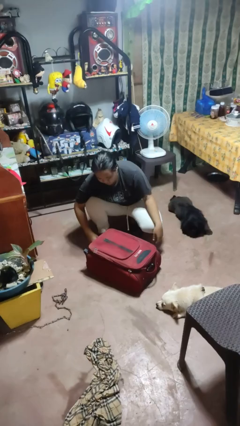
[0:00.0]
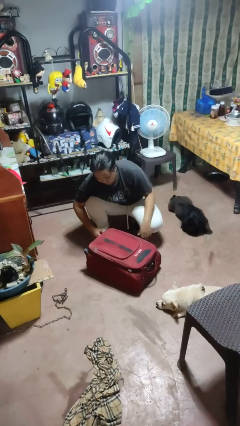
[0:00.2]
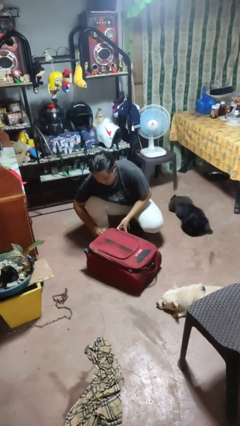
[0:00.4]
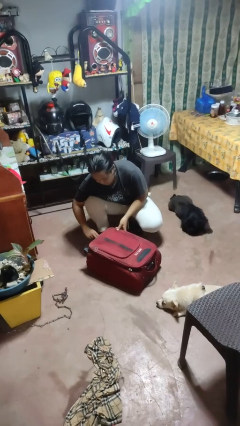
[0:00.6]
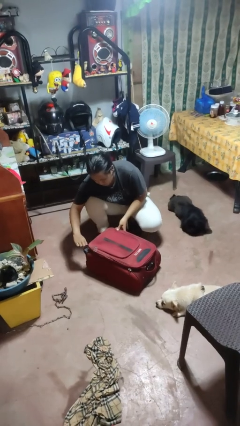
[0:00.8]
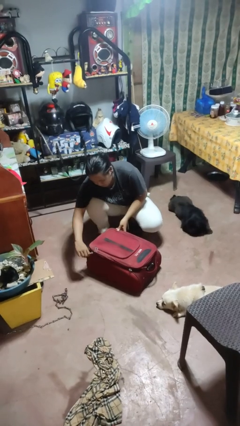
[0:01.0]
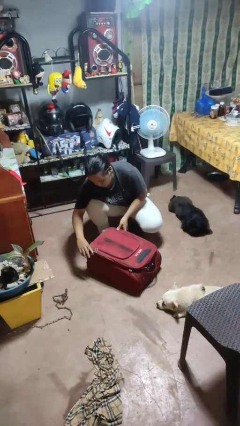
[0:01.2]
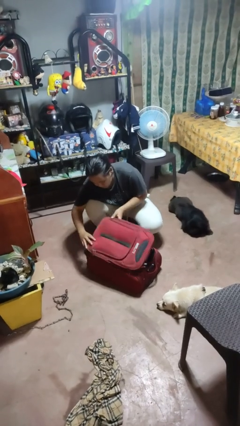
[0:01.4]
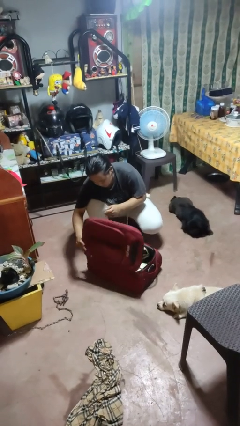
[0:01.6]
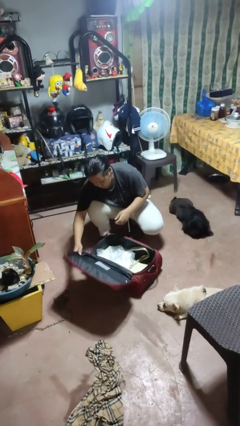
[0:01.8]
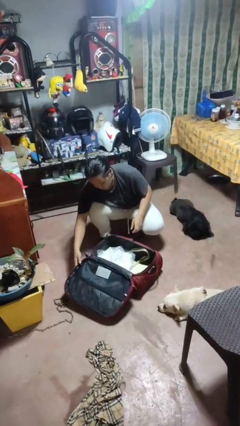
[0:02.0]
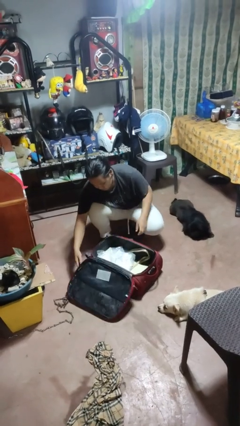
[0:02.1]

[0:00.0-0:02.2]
person opens suitcase

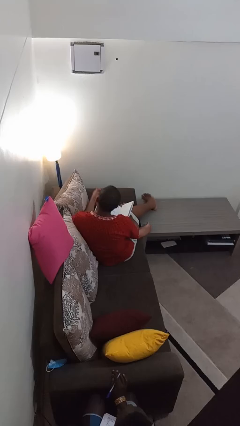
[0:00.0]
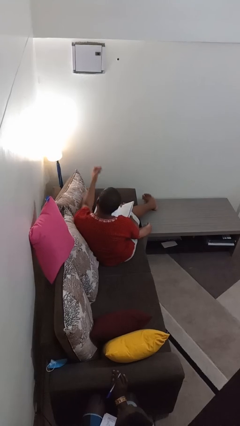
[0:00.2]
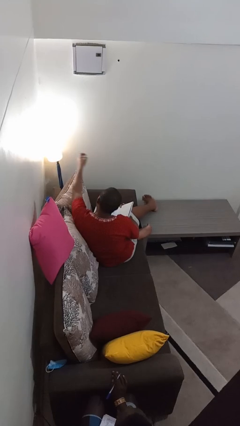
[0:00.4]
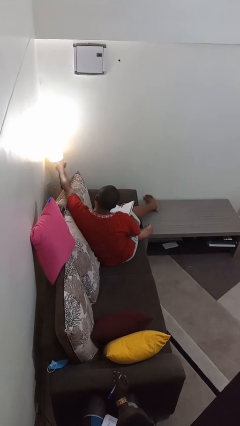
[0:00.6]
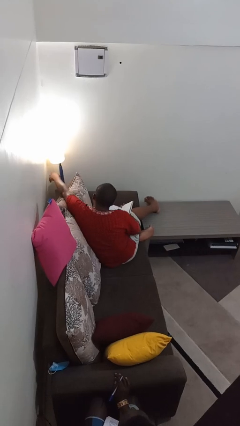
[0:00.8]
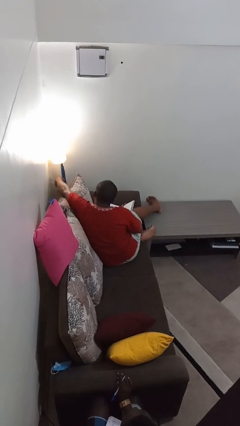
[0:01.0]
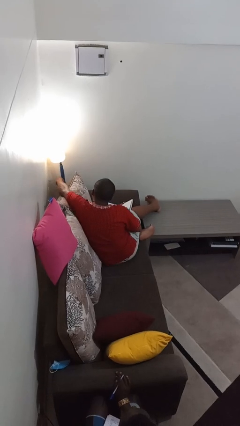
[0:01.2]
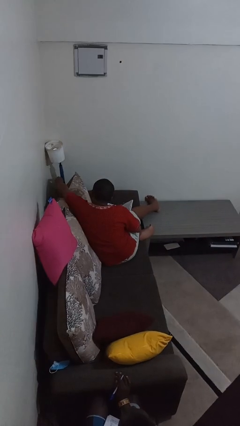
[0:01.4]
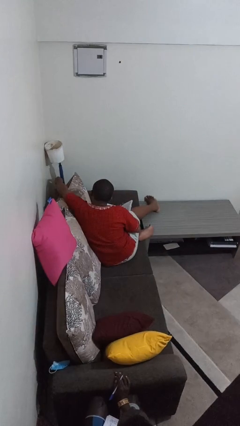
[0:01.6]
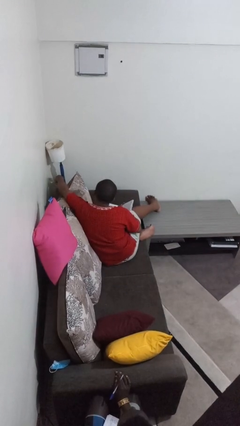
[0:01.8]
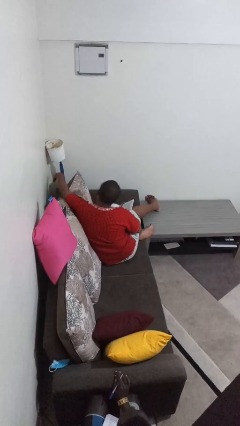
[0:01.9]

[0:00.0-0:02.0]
person turns off lamp

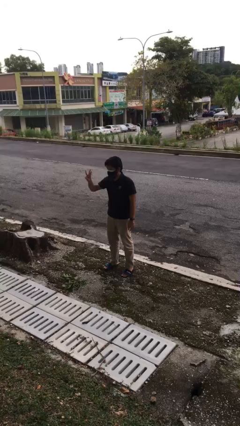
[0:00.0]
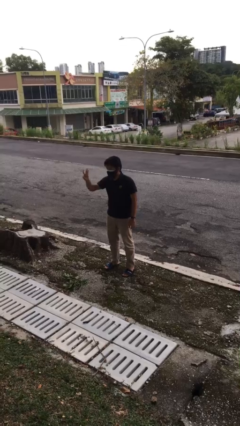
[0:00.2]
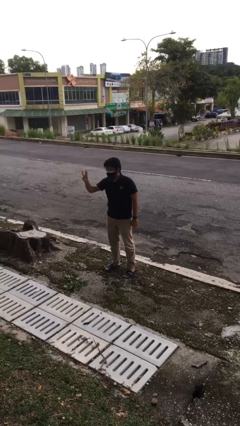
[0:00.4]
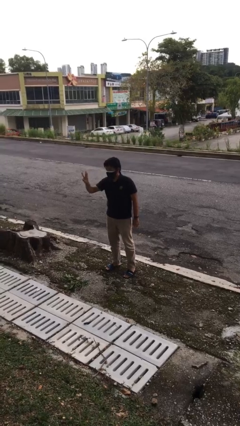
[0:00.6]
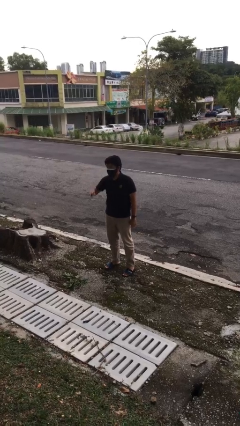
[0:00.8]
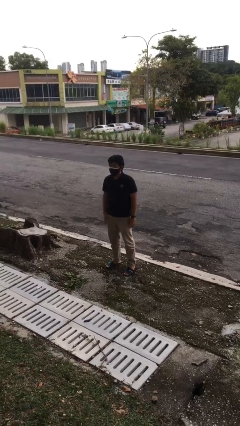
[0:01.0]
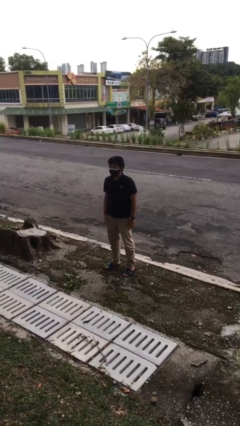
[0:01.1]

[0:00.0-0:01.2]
person gestures number three

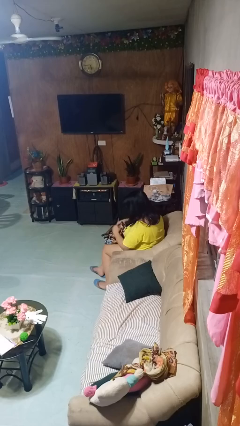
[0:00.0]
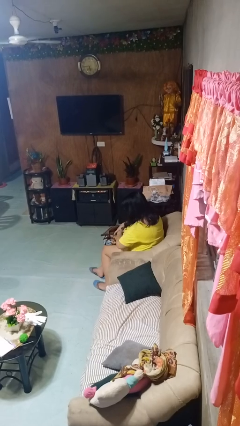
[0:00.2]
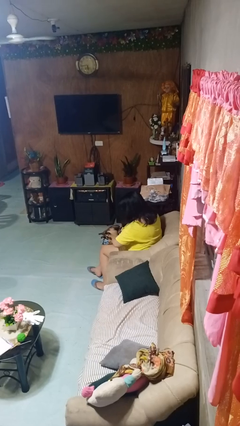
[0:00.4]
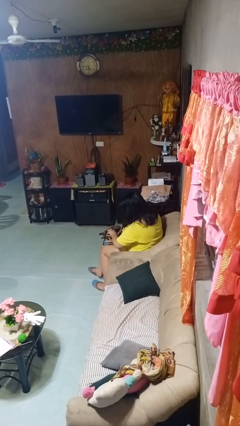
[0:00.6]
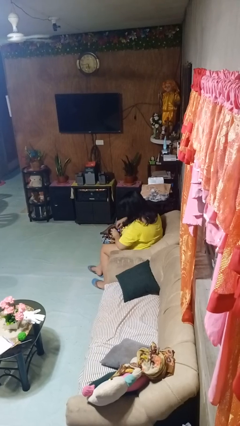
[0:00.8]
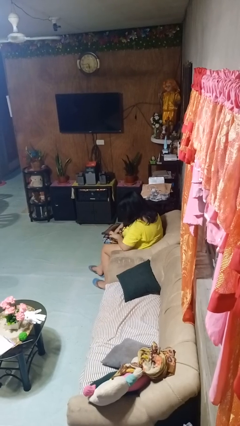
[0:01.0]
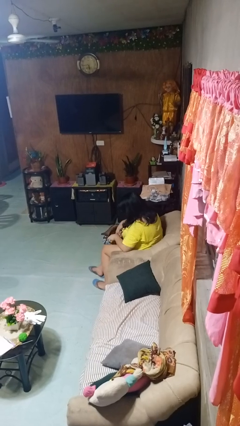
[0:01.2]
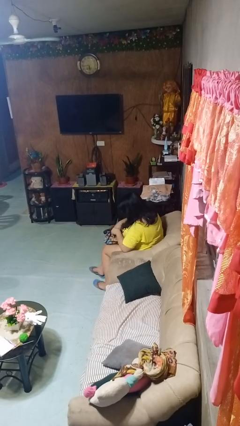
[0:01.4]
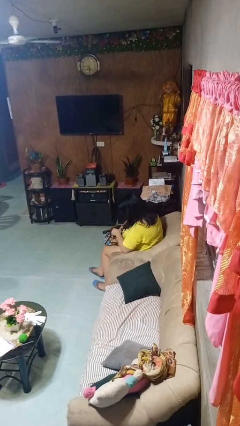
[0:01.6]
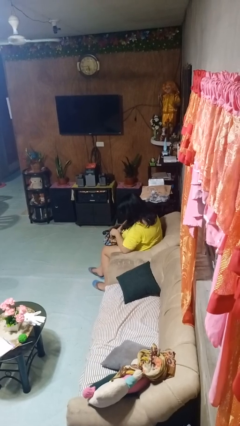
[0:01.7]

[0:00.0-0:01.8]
person searches in backpack

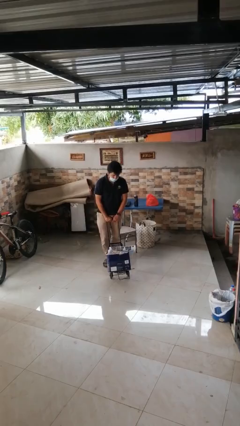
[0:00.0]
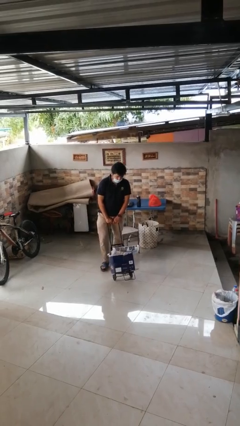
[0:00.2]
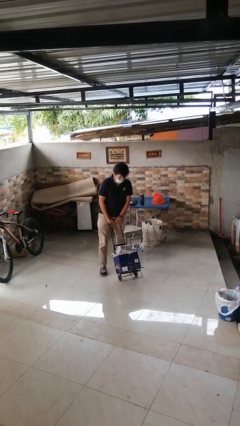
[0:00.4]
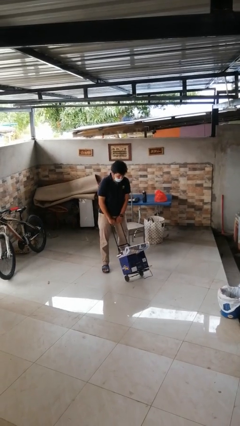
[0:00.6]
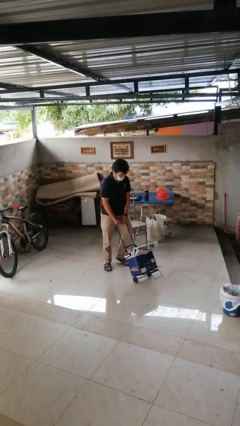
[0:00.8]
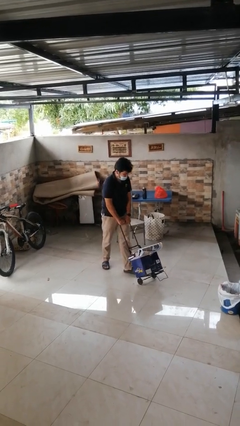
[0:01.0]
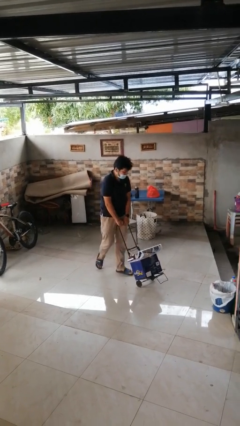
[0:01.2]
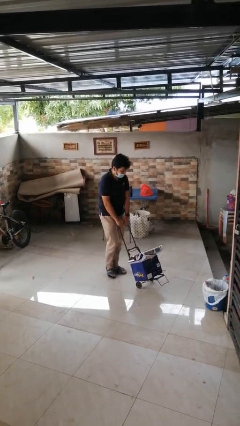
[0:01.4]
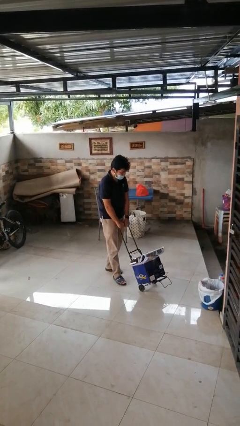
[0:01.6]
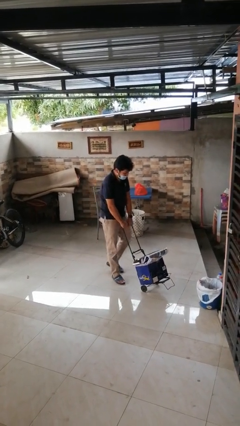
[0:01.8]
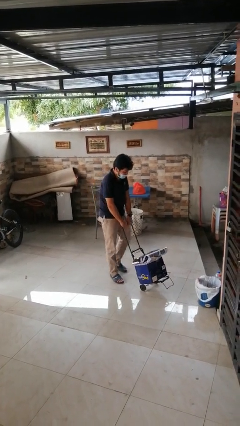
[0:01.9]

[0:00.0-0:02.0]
person pushes wheeled cart

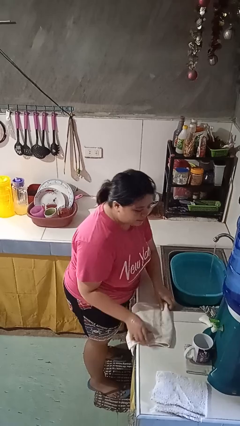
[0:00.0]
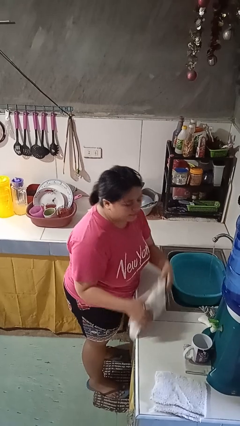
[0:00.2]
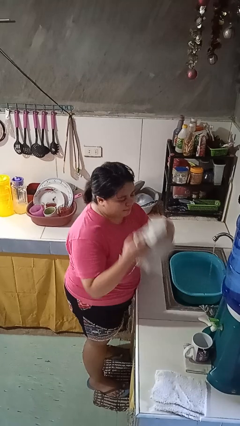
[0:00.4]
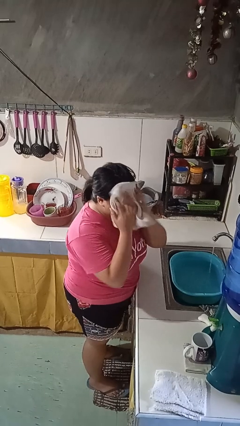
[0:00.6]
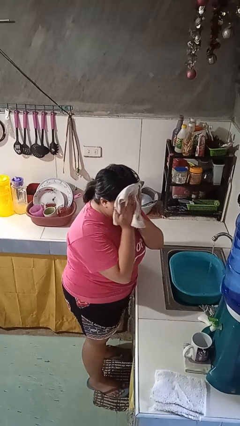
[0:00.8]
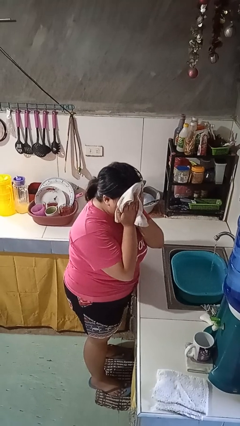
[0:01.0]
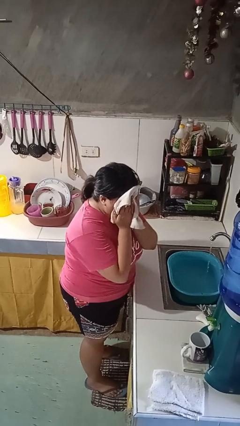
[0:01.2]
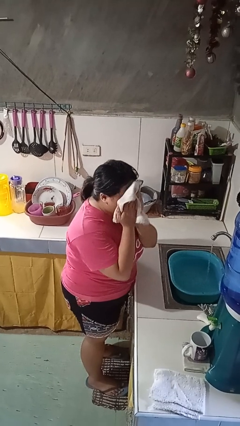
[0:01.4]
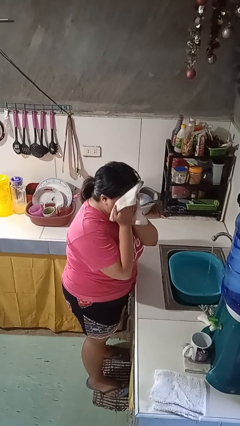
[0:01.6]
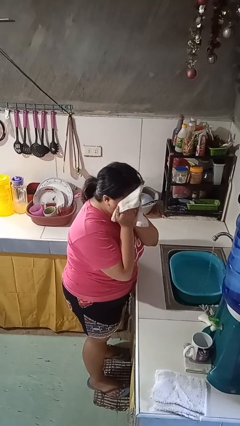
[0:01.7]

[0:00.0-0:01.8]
person dries face with towel

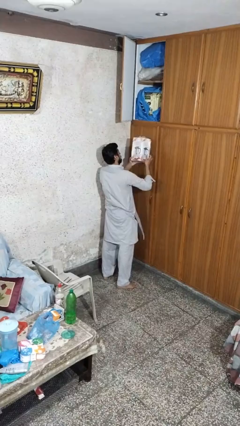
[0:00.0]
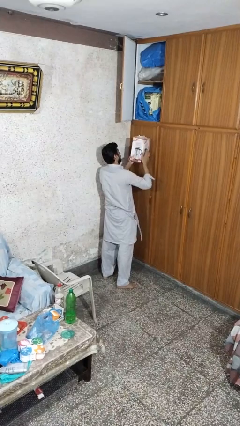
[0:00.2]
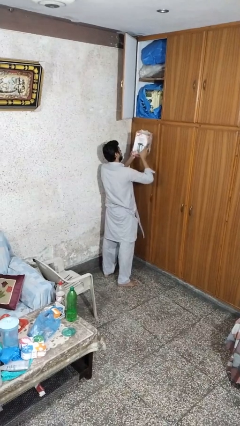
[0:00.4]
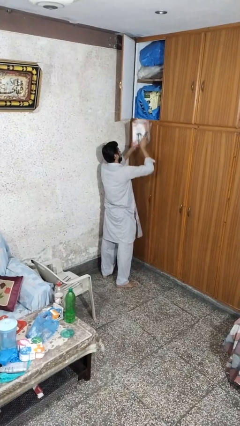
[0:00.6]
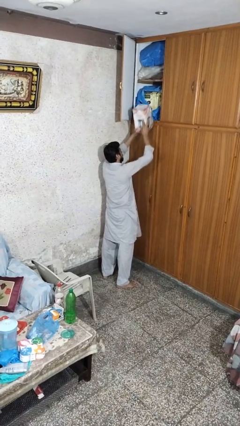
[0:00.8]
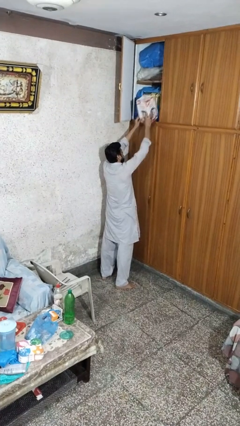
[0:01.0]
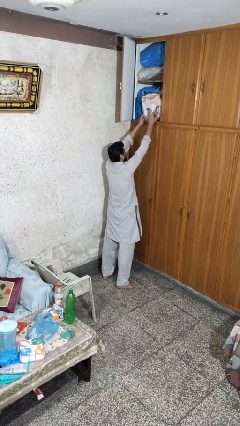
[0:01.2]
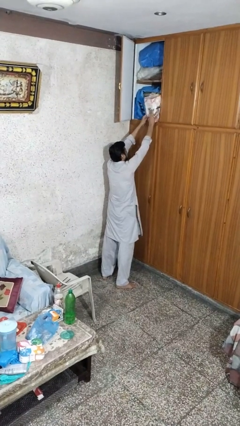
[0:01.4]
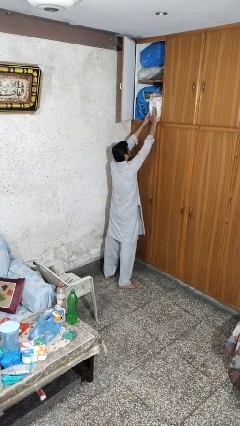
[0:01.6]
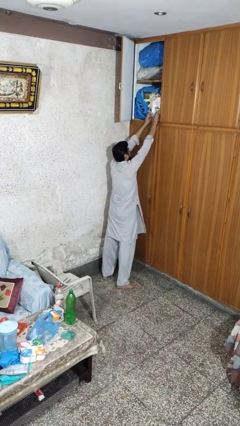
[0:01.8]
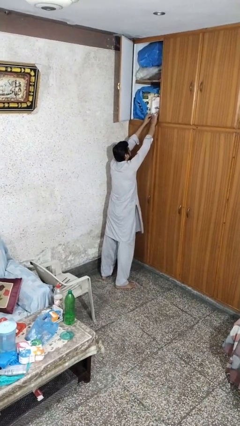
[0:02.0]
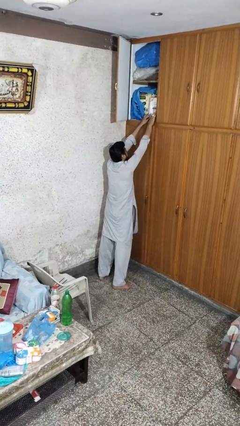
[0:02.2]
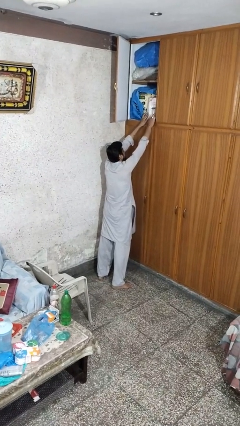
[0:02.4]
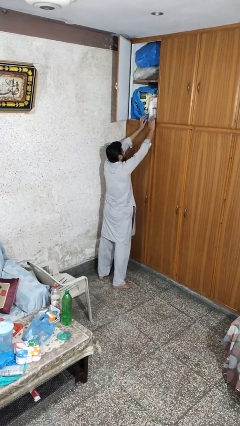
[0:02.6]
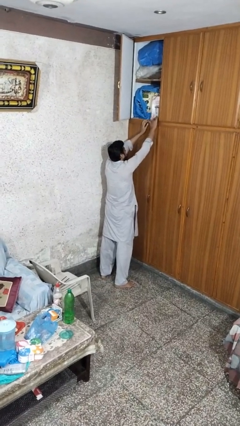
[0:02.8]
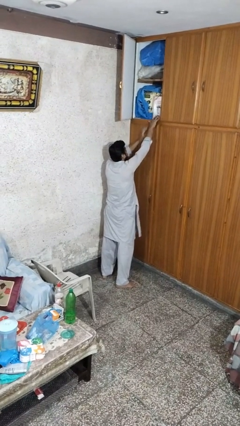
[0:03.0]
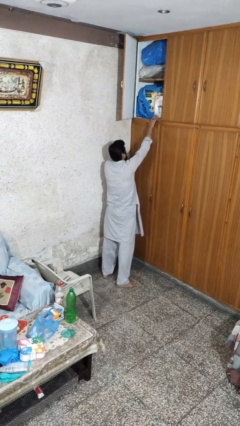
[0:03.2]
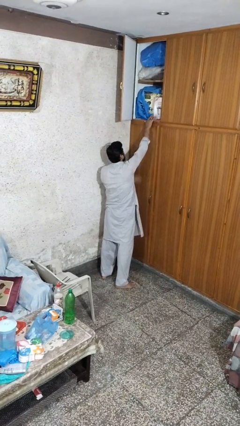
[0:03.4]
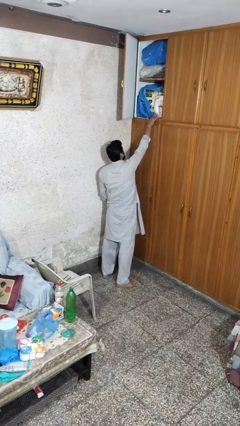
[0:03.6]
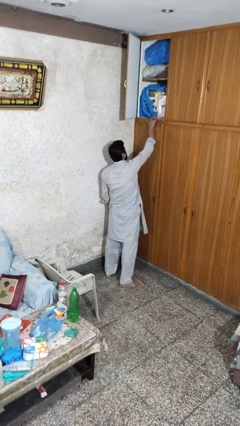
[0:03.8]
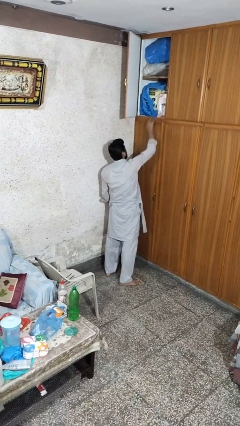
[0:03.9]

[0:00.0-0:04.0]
person puts down object on countertop

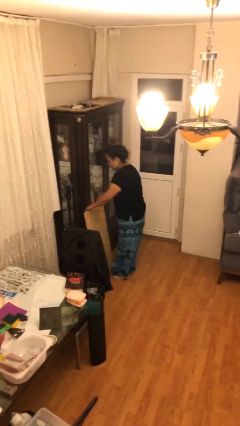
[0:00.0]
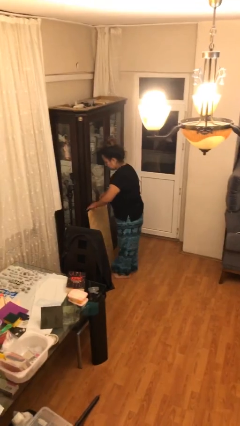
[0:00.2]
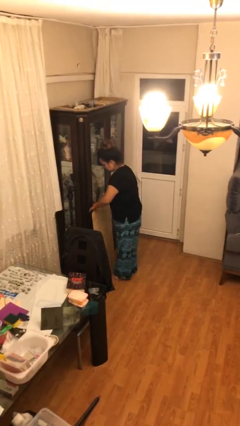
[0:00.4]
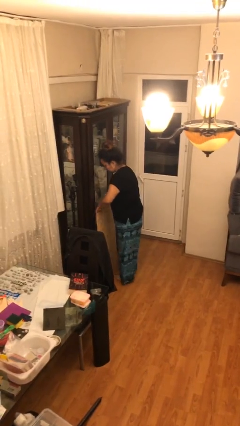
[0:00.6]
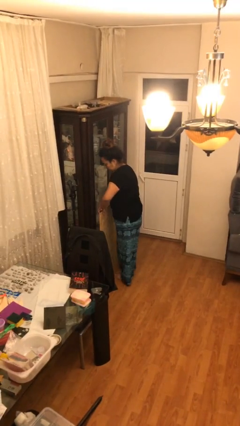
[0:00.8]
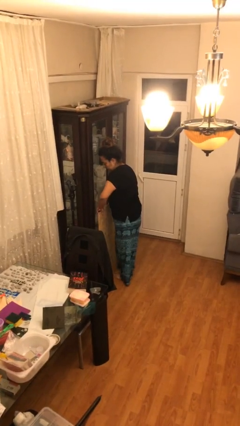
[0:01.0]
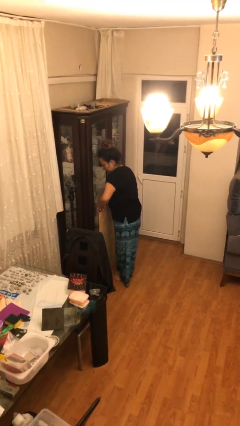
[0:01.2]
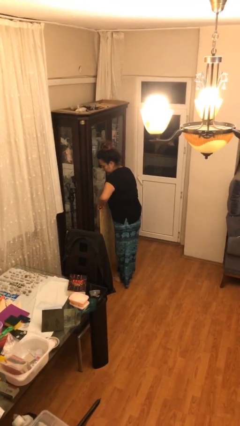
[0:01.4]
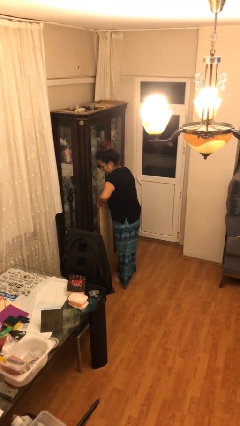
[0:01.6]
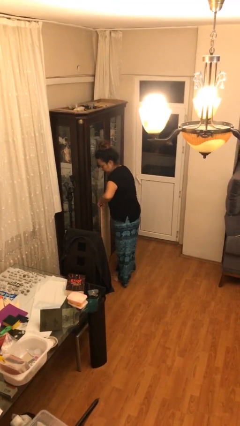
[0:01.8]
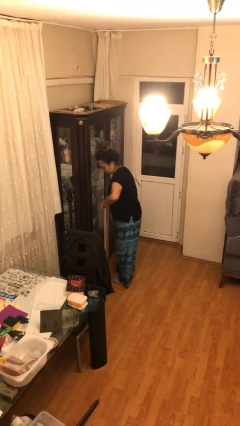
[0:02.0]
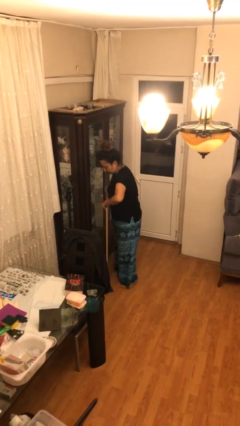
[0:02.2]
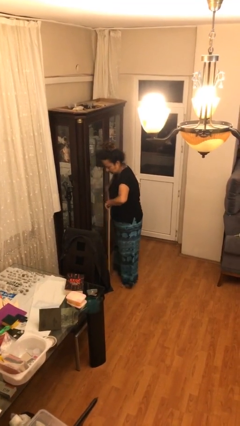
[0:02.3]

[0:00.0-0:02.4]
person picks up object from floor

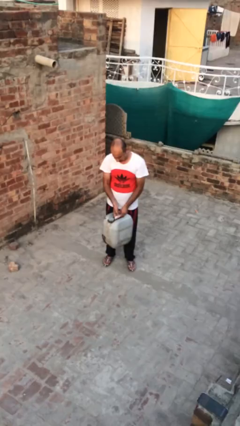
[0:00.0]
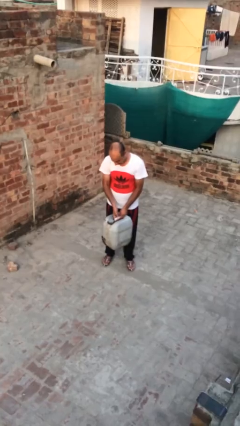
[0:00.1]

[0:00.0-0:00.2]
person puts down object on floor
